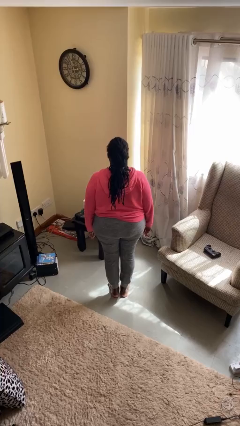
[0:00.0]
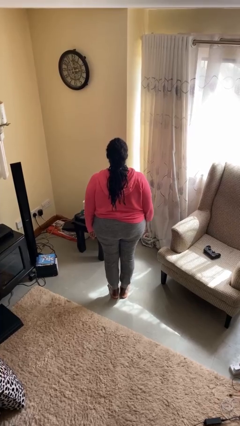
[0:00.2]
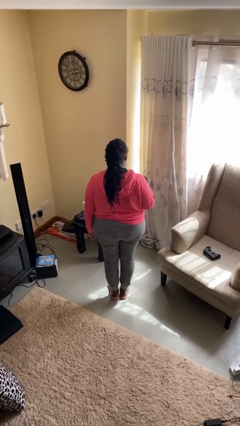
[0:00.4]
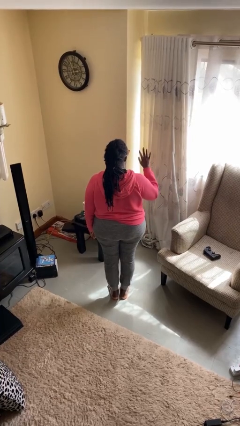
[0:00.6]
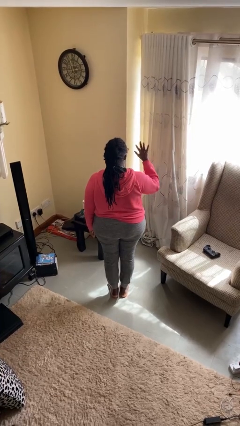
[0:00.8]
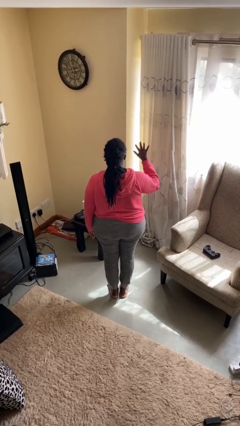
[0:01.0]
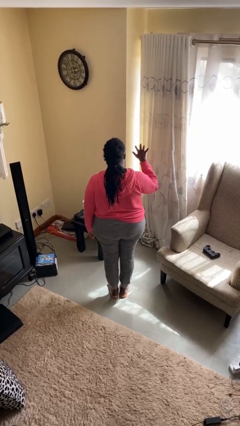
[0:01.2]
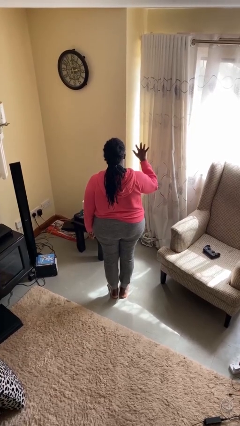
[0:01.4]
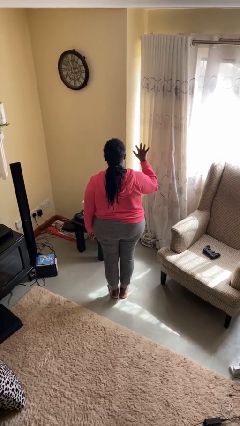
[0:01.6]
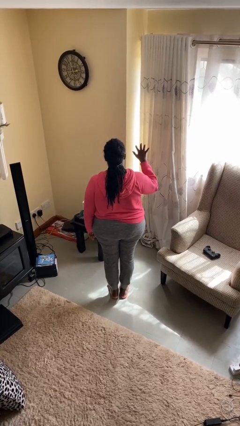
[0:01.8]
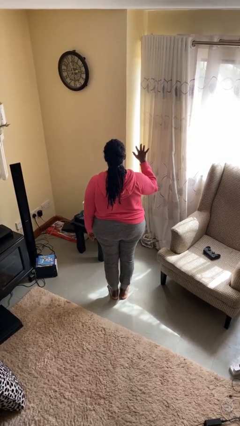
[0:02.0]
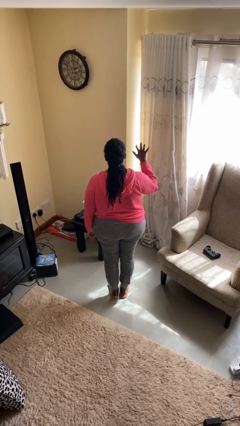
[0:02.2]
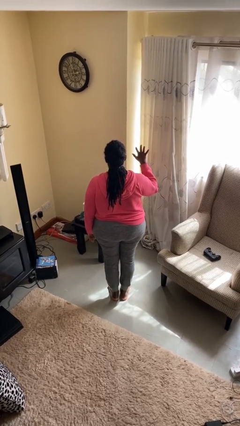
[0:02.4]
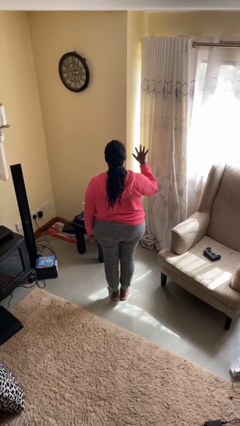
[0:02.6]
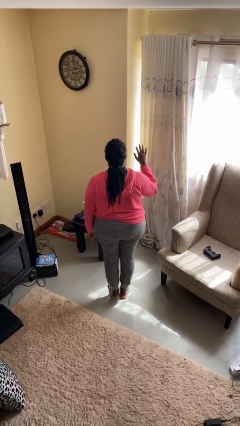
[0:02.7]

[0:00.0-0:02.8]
person gestures number five

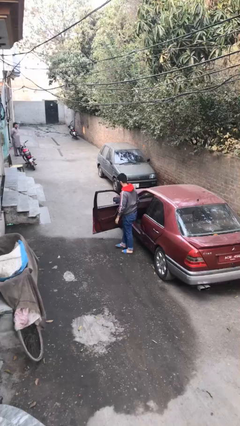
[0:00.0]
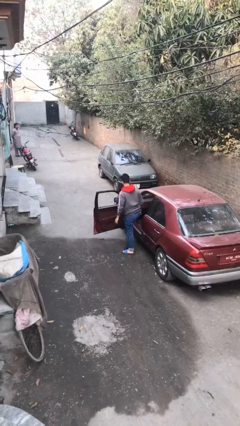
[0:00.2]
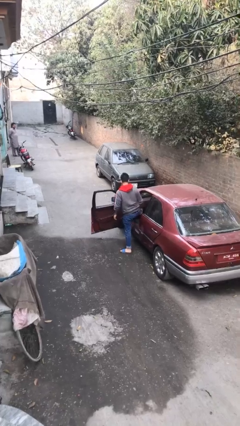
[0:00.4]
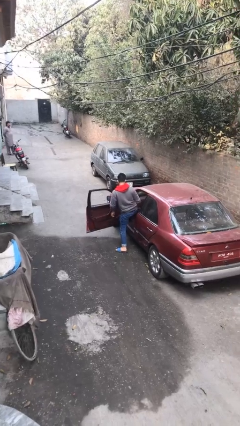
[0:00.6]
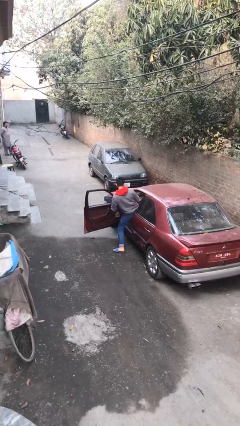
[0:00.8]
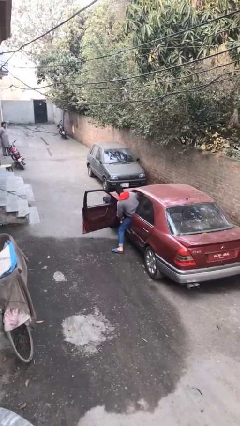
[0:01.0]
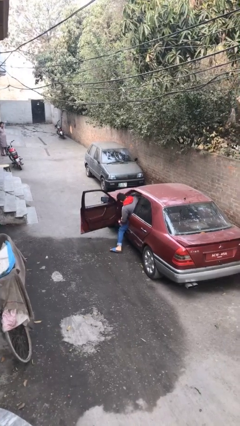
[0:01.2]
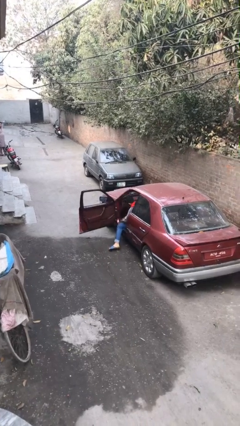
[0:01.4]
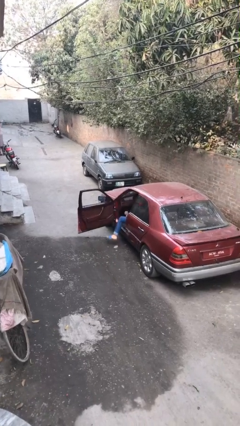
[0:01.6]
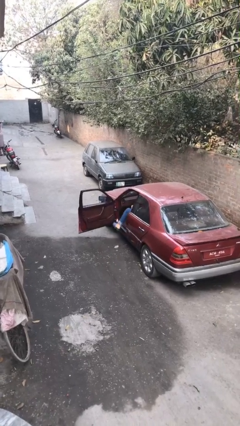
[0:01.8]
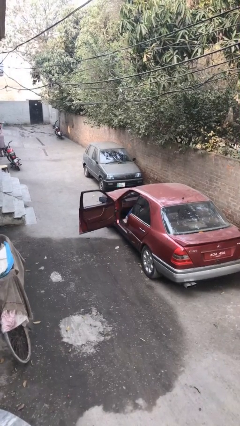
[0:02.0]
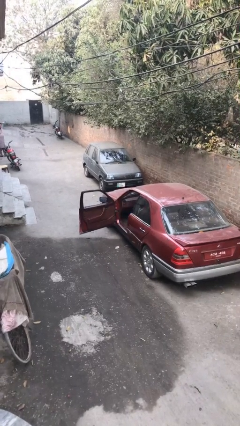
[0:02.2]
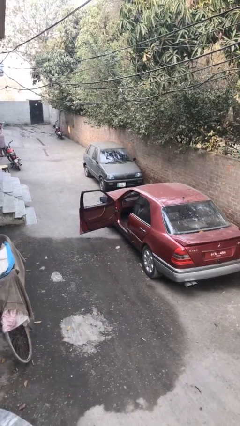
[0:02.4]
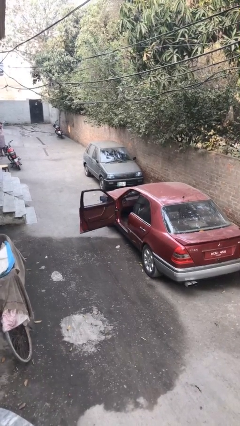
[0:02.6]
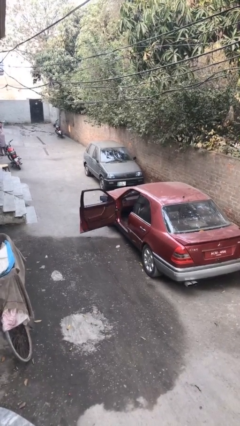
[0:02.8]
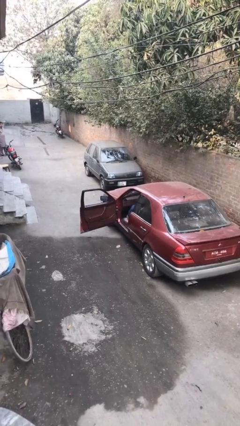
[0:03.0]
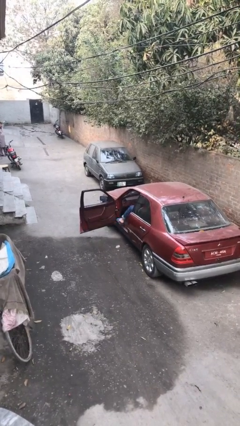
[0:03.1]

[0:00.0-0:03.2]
person enters car

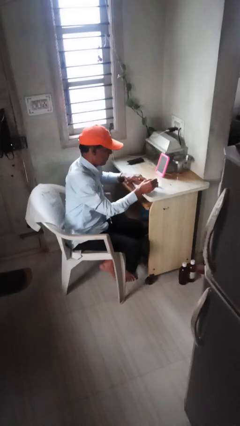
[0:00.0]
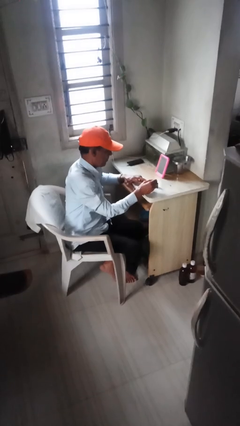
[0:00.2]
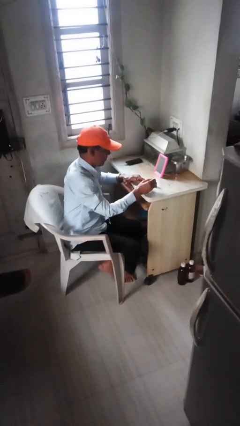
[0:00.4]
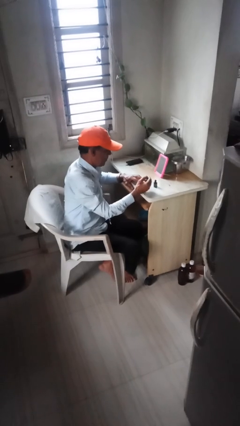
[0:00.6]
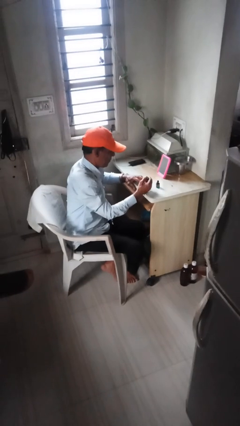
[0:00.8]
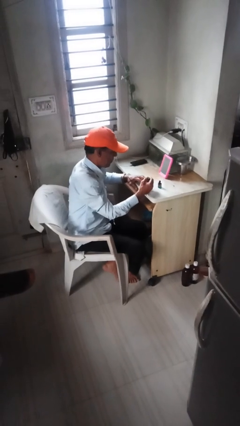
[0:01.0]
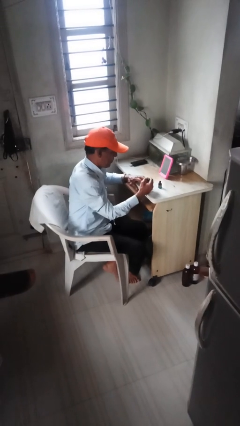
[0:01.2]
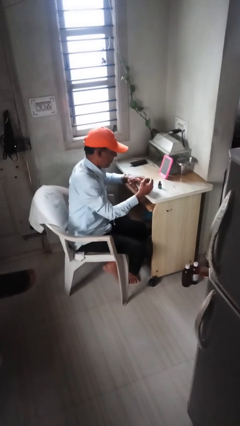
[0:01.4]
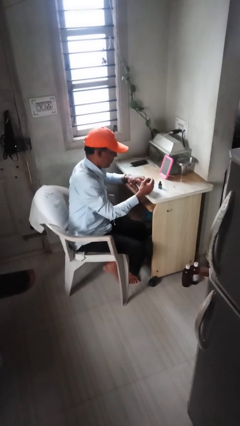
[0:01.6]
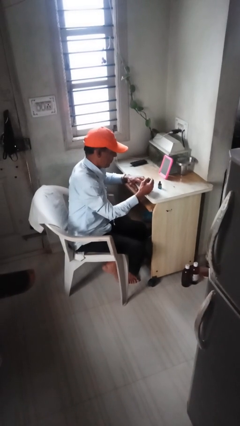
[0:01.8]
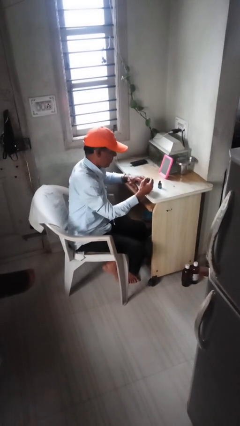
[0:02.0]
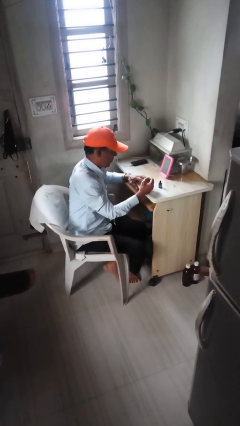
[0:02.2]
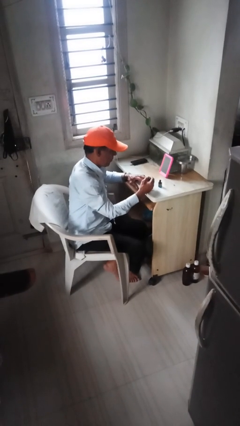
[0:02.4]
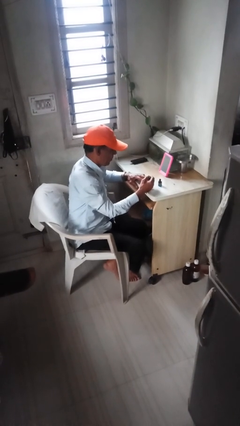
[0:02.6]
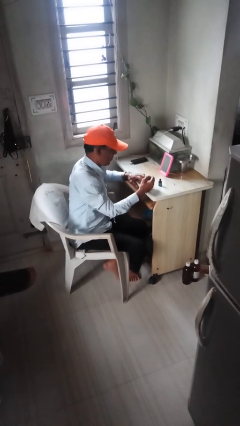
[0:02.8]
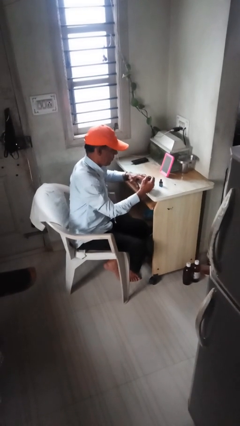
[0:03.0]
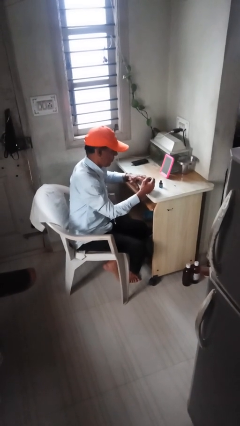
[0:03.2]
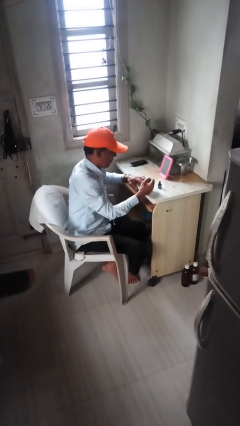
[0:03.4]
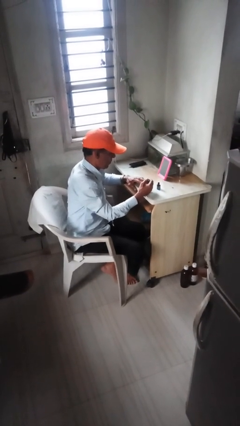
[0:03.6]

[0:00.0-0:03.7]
person paints fingernails

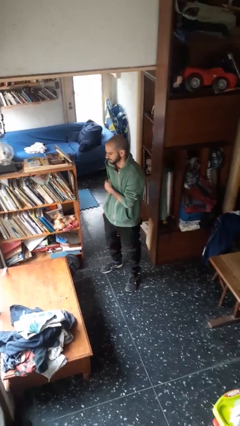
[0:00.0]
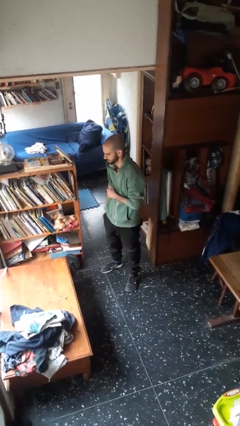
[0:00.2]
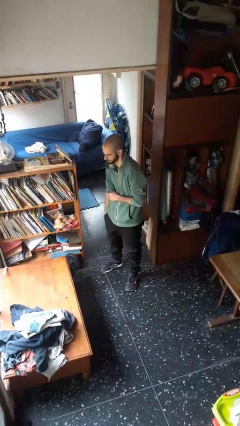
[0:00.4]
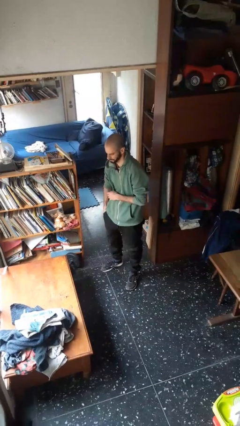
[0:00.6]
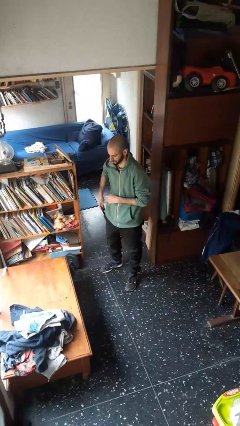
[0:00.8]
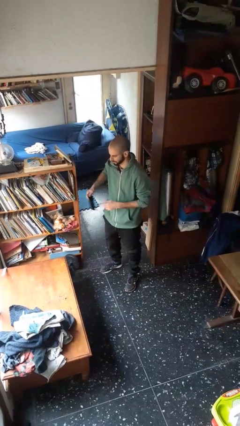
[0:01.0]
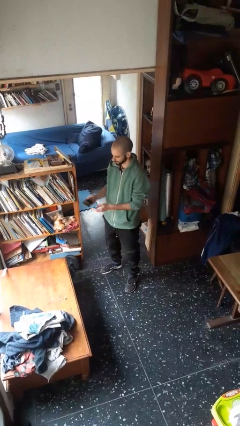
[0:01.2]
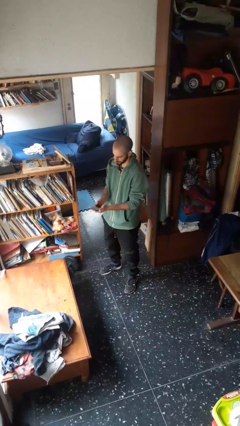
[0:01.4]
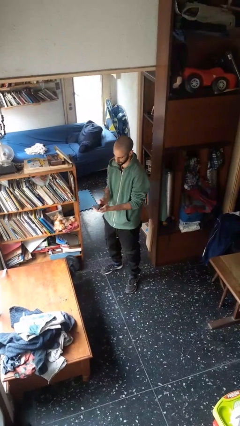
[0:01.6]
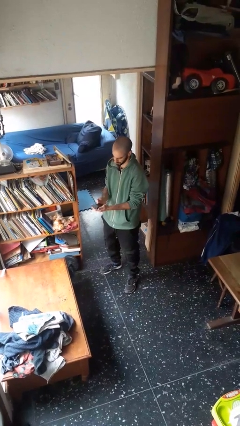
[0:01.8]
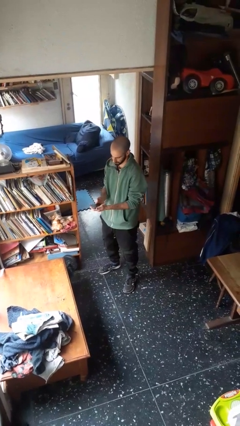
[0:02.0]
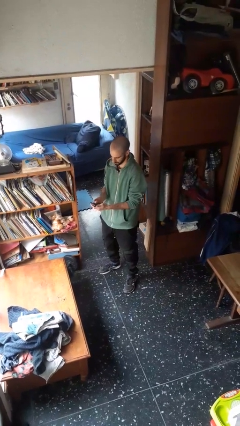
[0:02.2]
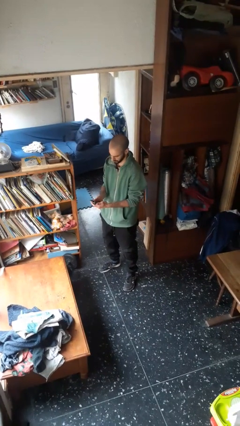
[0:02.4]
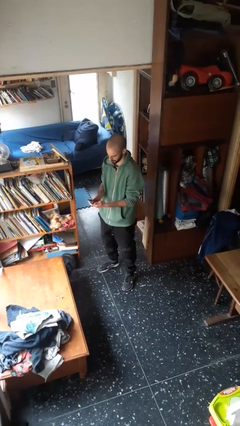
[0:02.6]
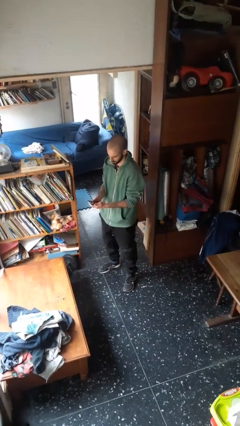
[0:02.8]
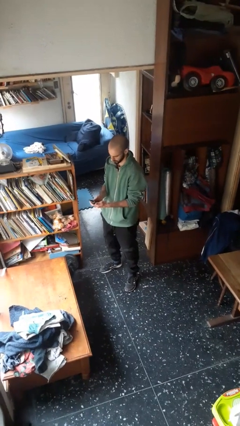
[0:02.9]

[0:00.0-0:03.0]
person takes phone from pocket

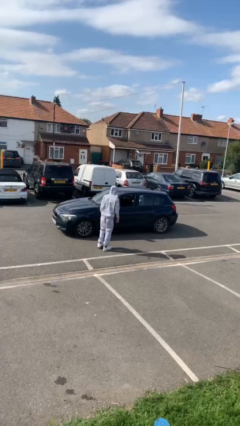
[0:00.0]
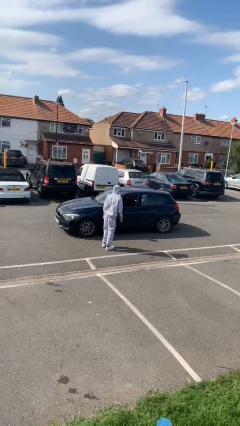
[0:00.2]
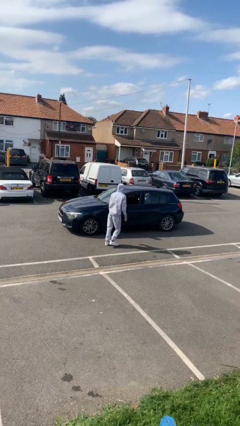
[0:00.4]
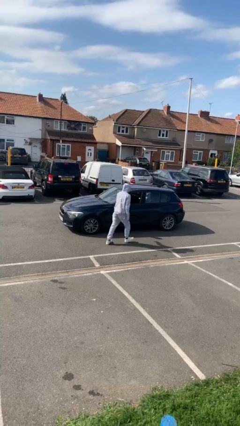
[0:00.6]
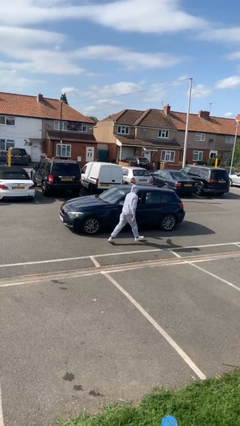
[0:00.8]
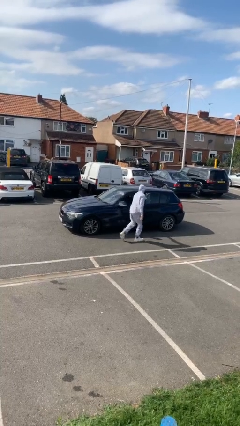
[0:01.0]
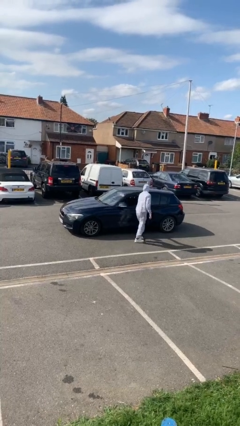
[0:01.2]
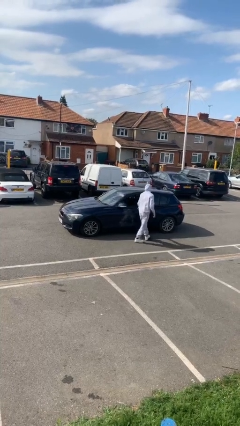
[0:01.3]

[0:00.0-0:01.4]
car picks up person

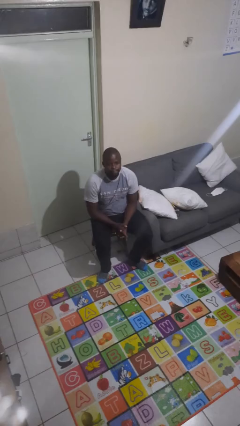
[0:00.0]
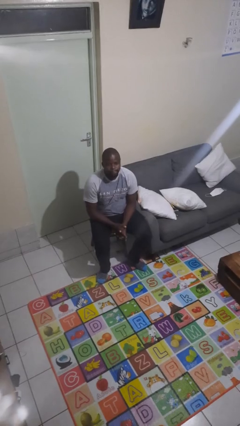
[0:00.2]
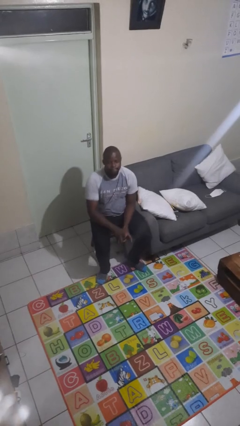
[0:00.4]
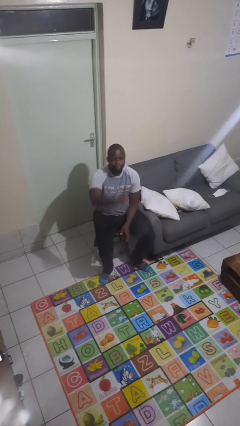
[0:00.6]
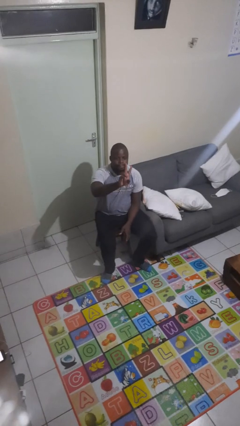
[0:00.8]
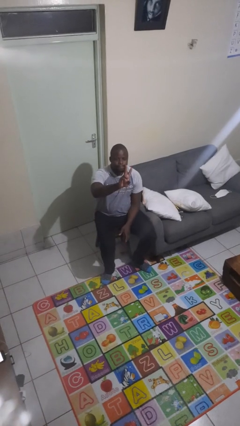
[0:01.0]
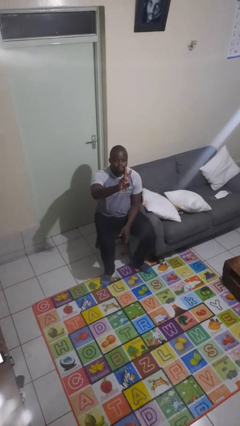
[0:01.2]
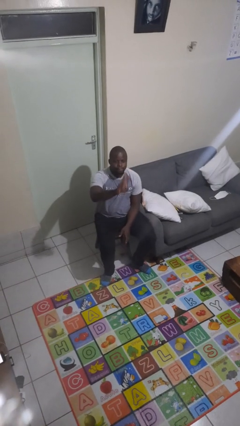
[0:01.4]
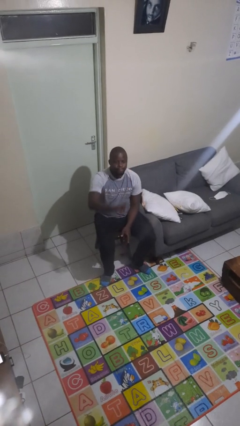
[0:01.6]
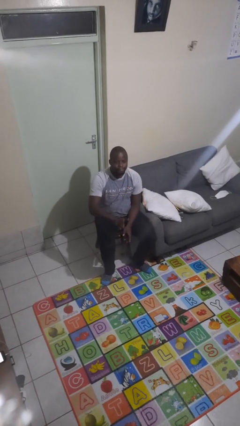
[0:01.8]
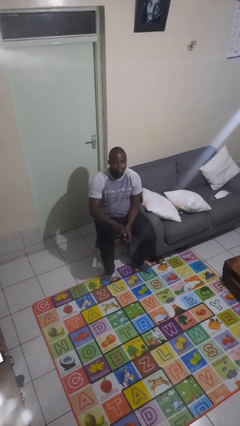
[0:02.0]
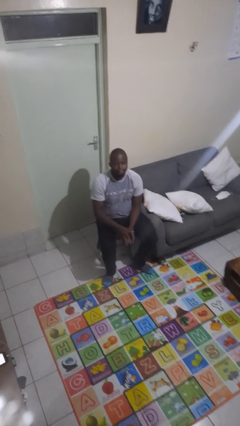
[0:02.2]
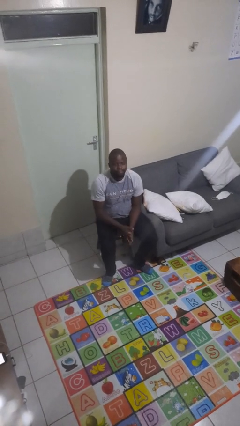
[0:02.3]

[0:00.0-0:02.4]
person gestures peace

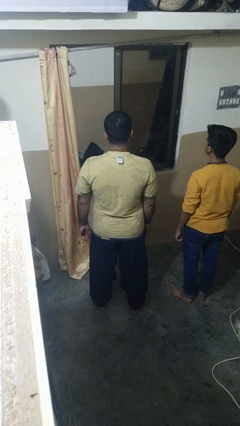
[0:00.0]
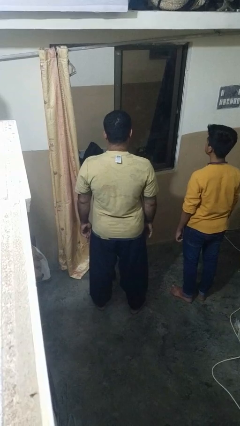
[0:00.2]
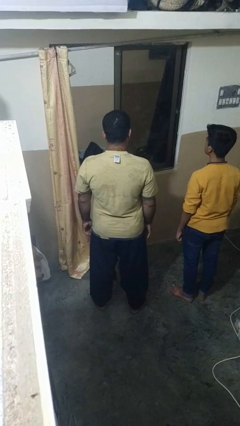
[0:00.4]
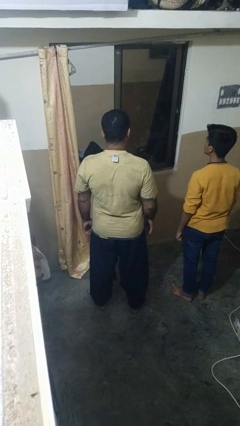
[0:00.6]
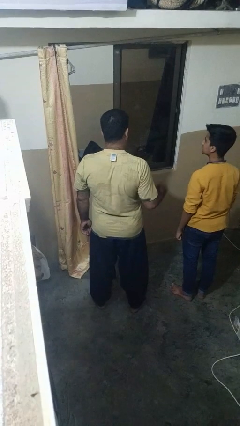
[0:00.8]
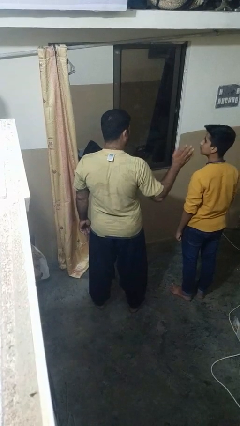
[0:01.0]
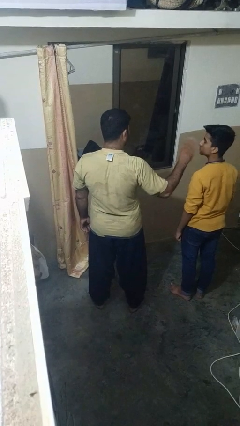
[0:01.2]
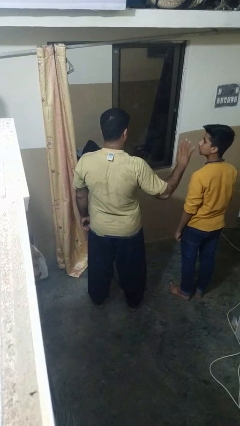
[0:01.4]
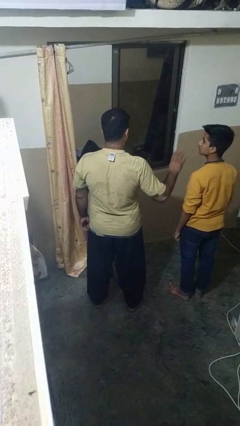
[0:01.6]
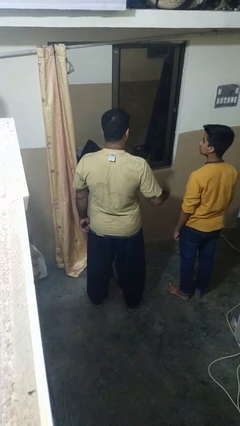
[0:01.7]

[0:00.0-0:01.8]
person waves at person
